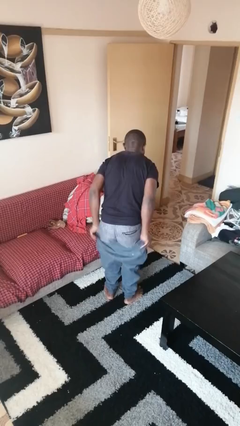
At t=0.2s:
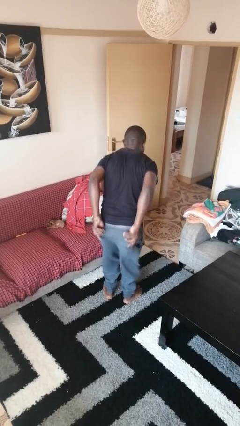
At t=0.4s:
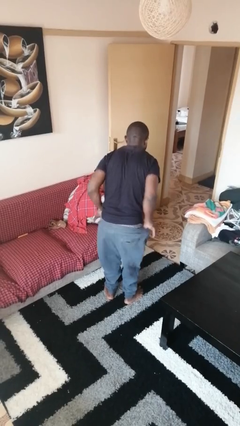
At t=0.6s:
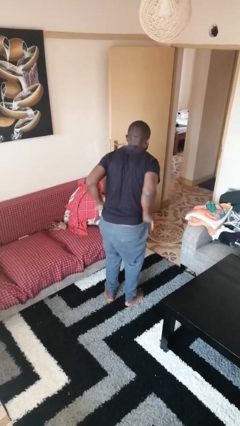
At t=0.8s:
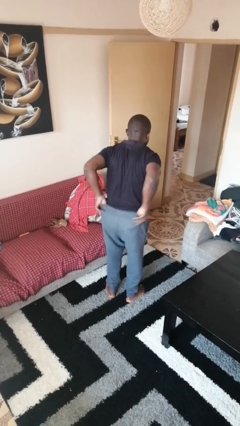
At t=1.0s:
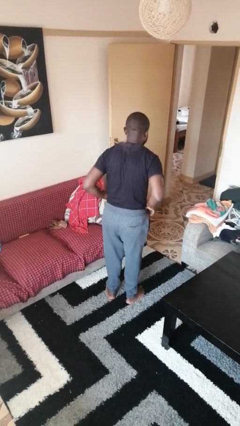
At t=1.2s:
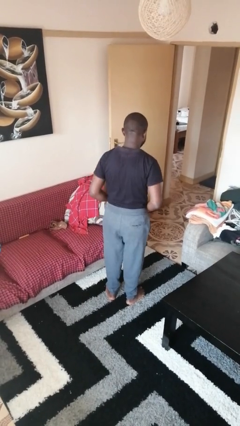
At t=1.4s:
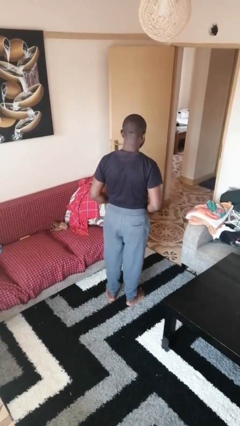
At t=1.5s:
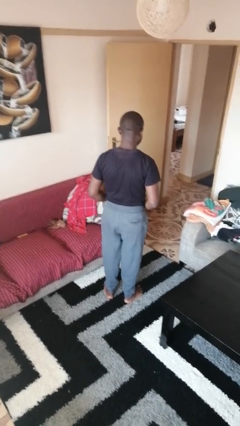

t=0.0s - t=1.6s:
person puts on pants

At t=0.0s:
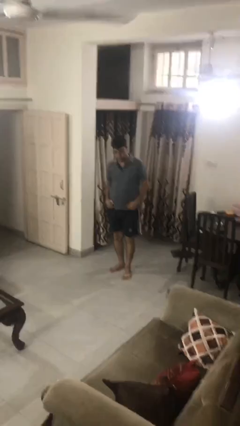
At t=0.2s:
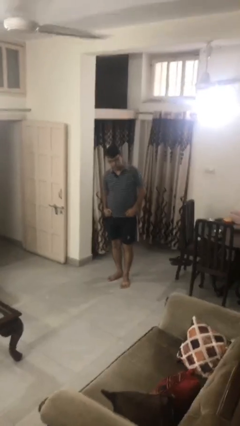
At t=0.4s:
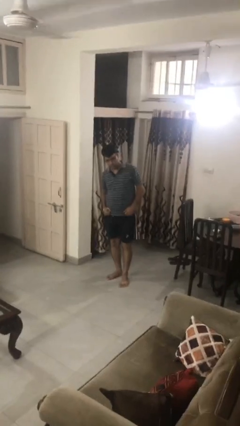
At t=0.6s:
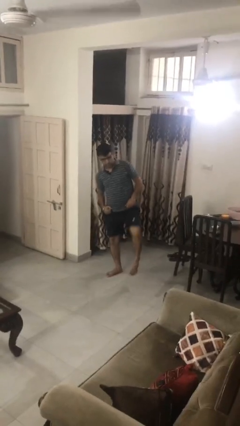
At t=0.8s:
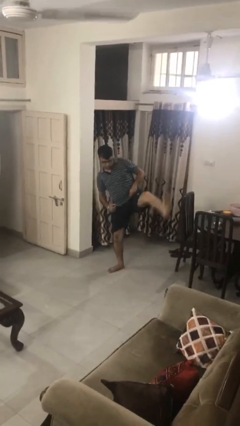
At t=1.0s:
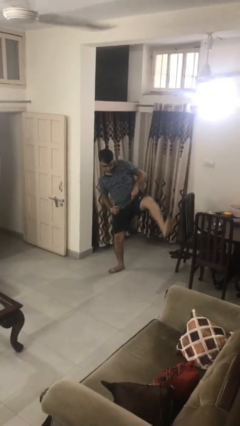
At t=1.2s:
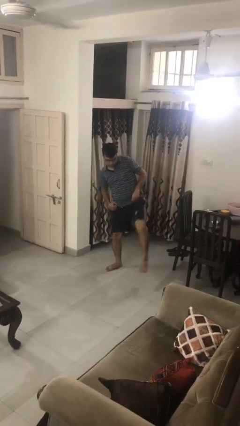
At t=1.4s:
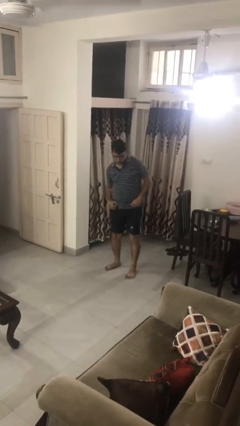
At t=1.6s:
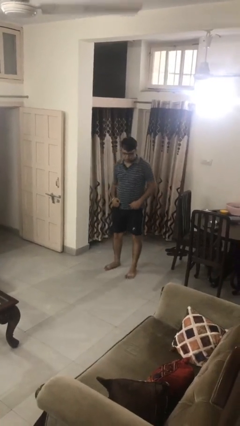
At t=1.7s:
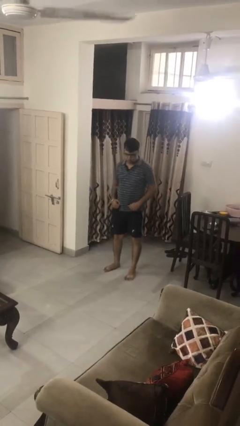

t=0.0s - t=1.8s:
person karate kicks

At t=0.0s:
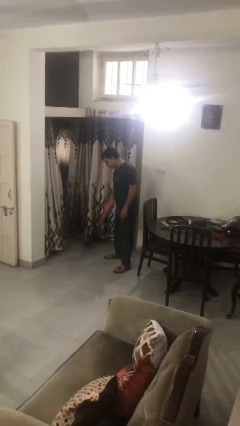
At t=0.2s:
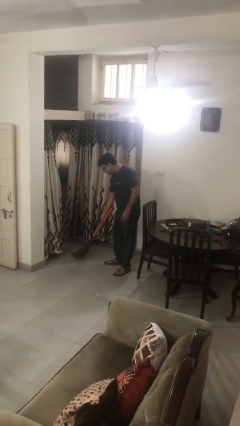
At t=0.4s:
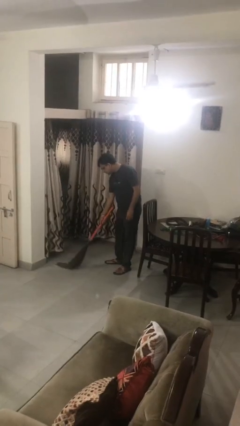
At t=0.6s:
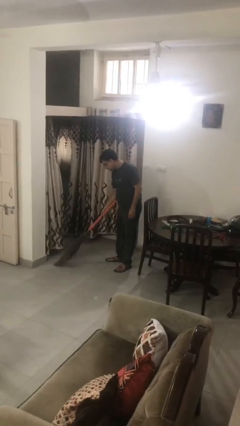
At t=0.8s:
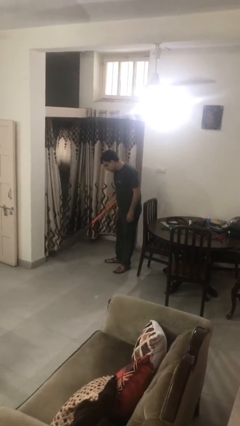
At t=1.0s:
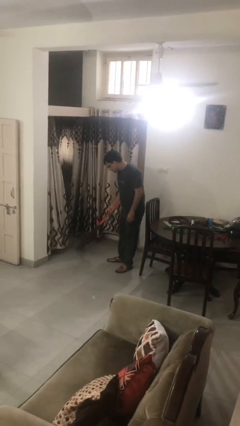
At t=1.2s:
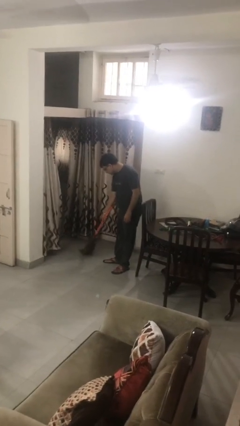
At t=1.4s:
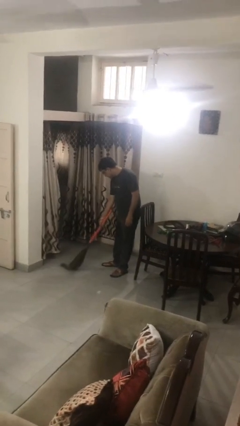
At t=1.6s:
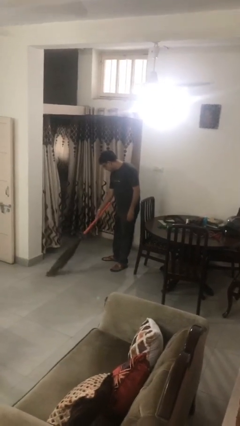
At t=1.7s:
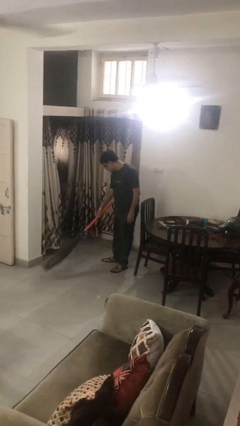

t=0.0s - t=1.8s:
person sweeps floor

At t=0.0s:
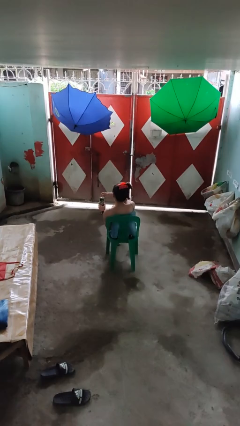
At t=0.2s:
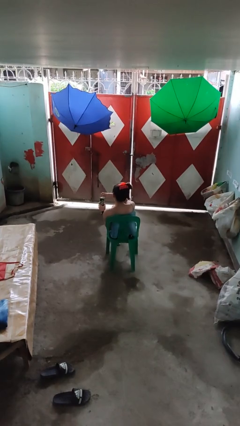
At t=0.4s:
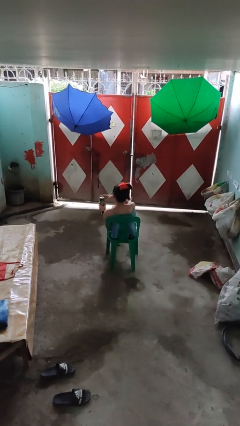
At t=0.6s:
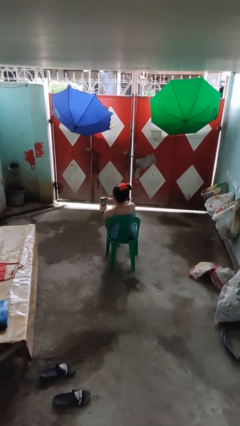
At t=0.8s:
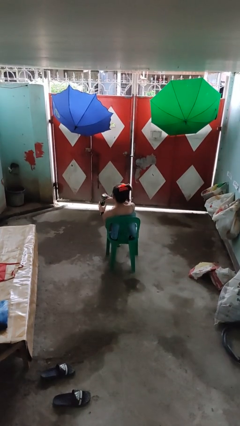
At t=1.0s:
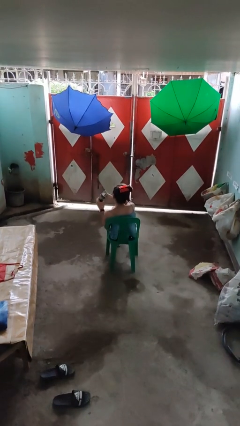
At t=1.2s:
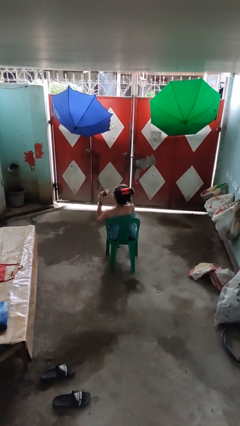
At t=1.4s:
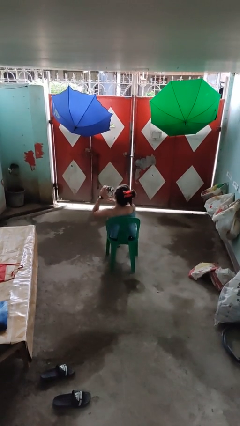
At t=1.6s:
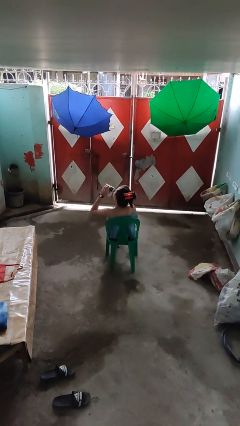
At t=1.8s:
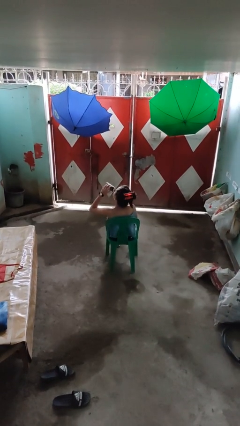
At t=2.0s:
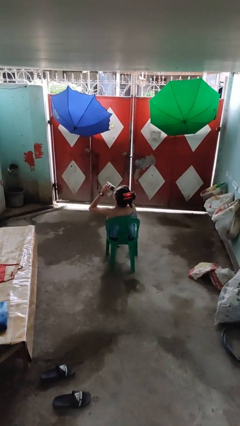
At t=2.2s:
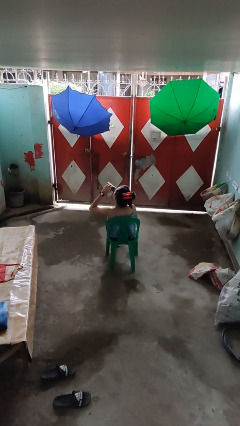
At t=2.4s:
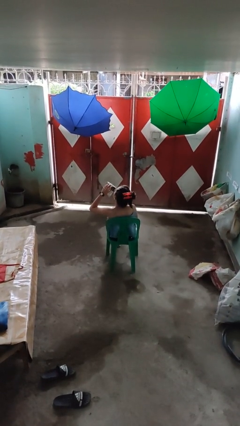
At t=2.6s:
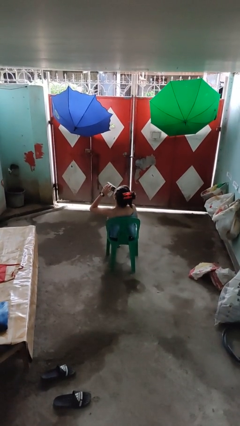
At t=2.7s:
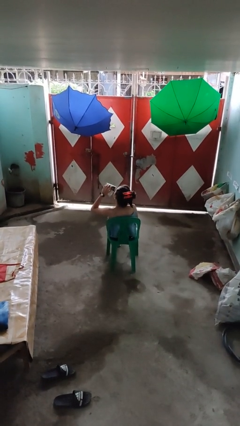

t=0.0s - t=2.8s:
person drinks from beverage can

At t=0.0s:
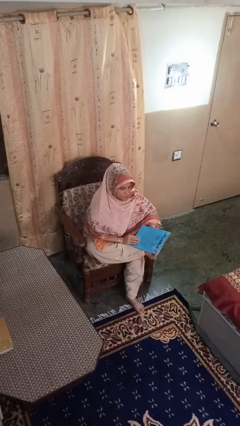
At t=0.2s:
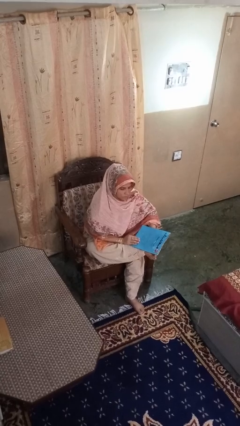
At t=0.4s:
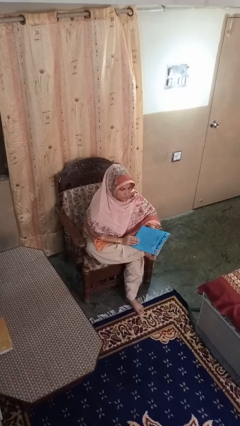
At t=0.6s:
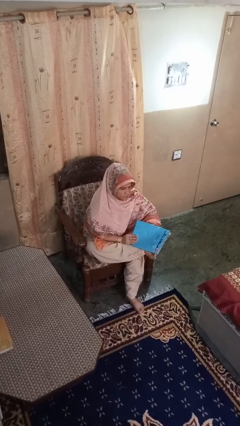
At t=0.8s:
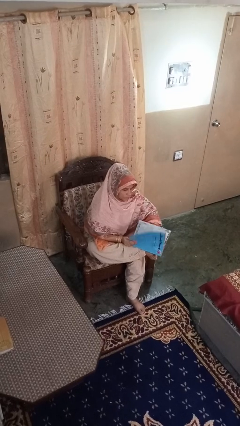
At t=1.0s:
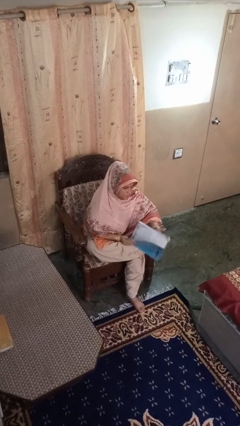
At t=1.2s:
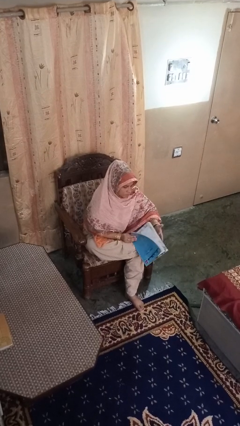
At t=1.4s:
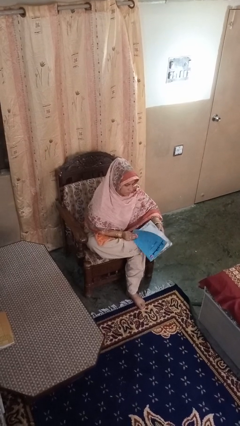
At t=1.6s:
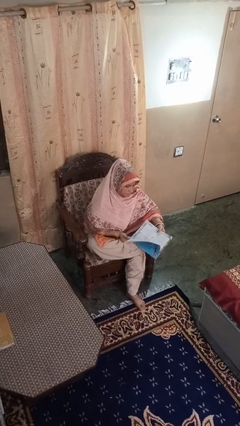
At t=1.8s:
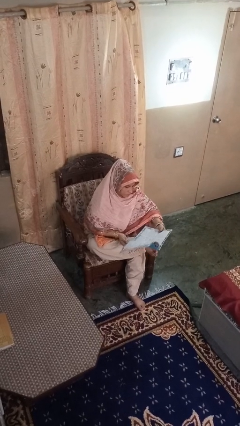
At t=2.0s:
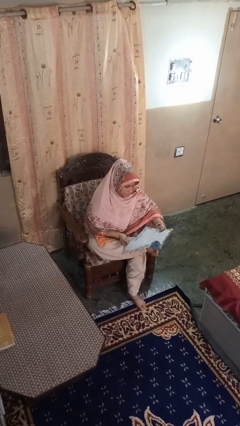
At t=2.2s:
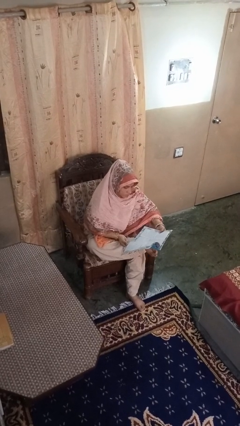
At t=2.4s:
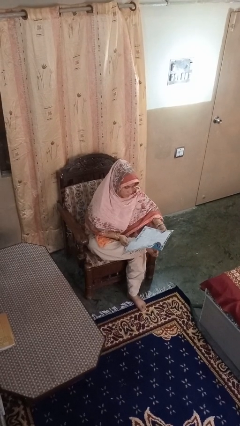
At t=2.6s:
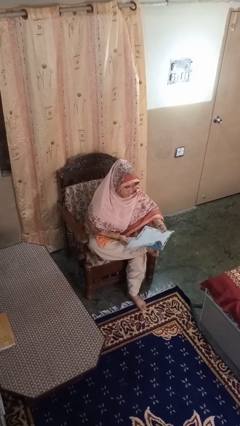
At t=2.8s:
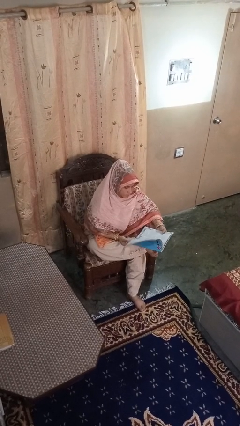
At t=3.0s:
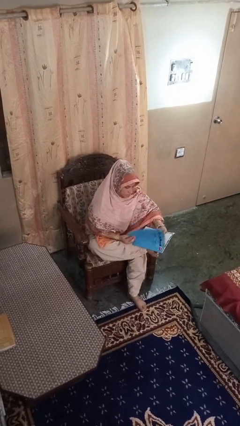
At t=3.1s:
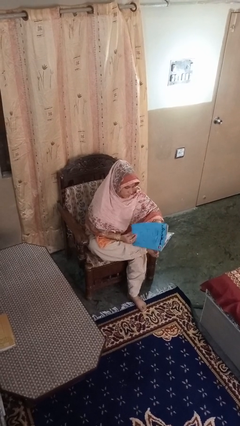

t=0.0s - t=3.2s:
person reads magazine

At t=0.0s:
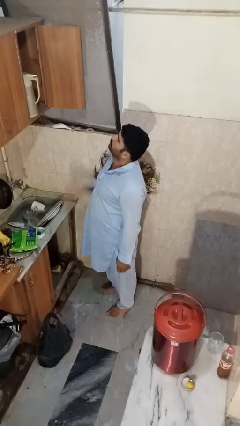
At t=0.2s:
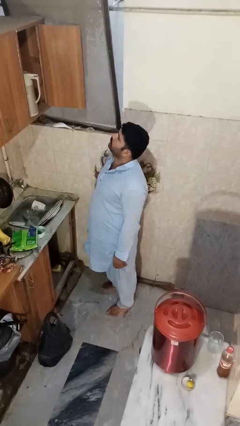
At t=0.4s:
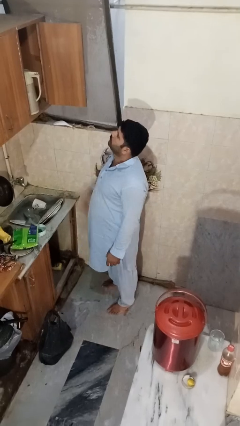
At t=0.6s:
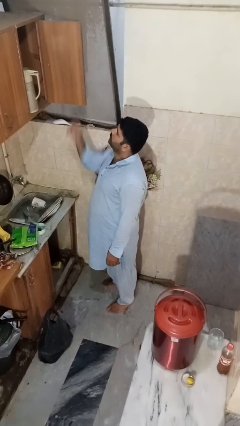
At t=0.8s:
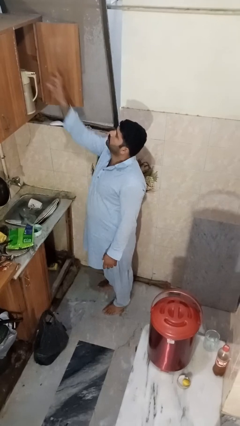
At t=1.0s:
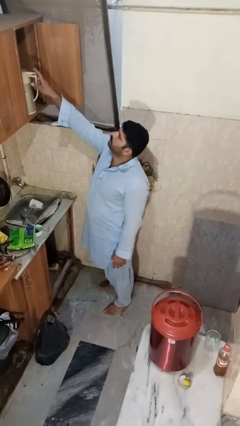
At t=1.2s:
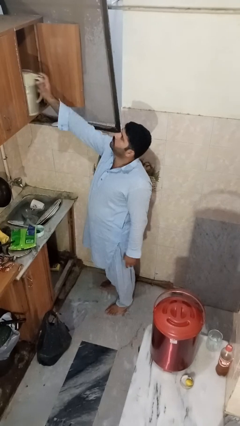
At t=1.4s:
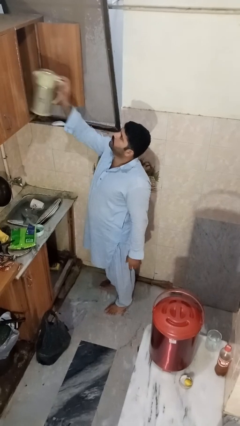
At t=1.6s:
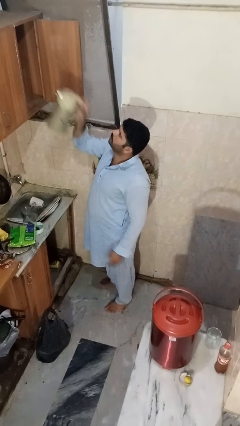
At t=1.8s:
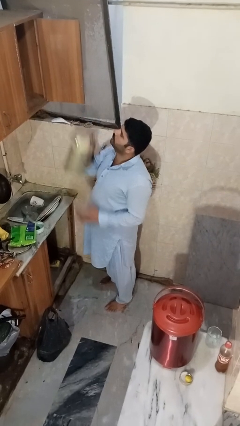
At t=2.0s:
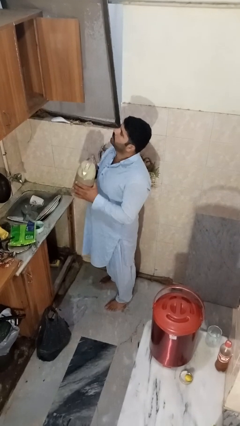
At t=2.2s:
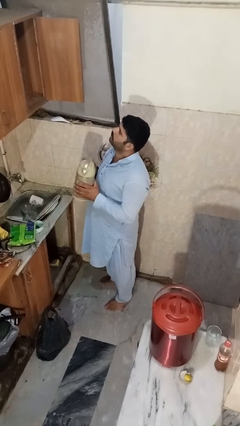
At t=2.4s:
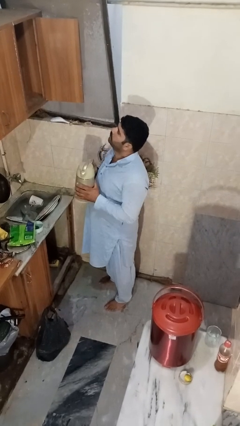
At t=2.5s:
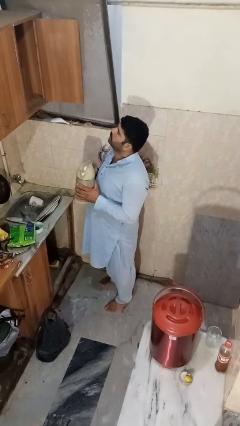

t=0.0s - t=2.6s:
person takes object from cabinet

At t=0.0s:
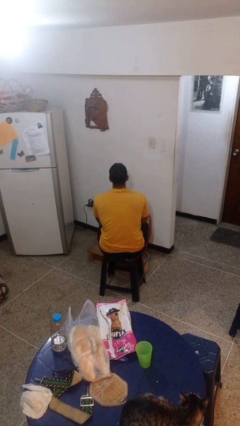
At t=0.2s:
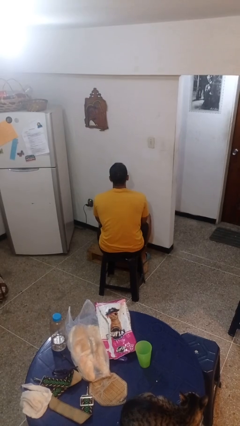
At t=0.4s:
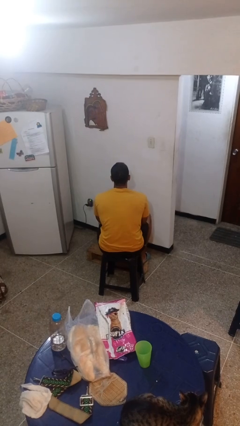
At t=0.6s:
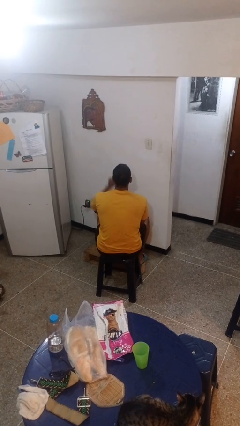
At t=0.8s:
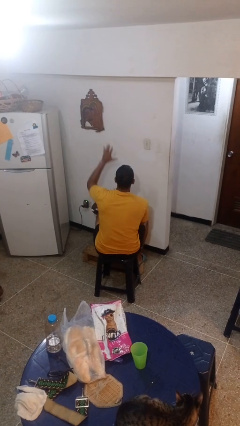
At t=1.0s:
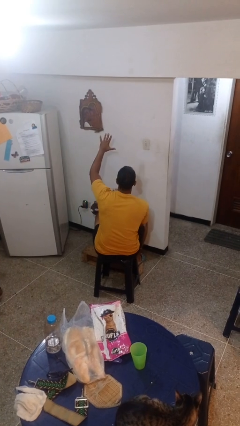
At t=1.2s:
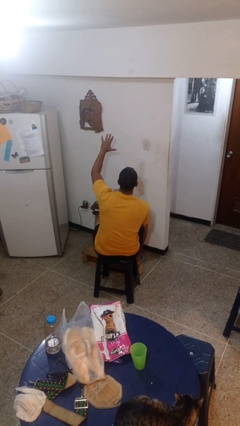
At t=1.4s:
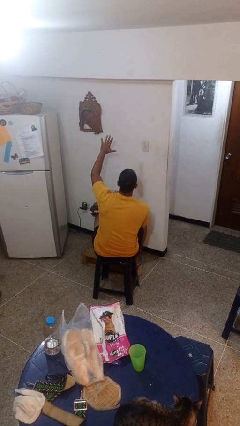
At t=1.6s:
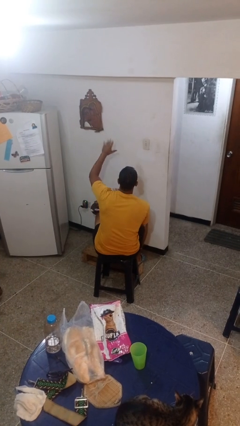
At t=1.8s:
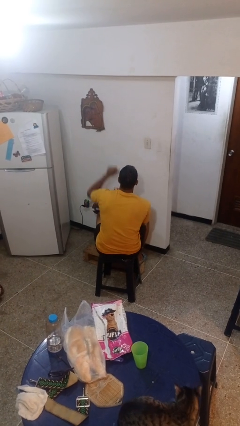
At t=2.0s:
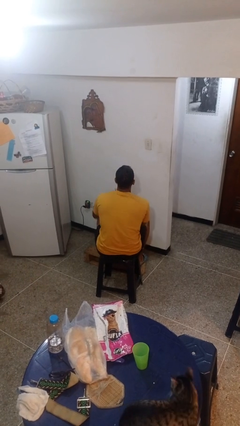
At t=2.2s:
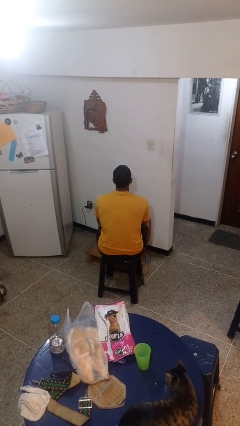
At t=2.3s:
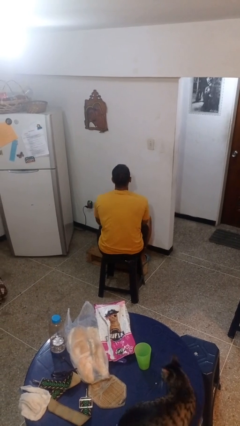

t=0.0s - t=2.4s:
person gestures number five

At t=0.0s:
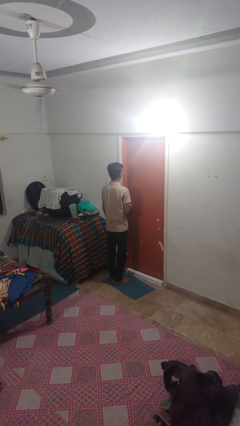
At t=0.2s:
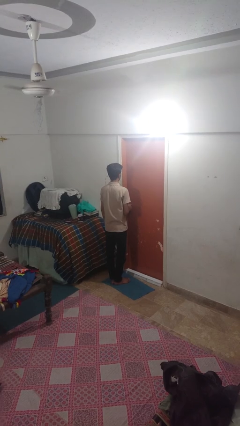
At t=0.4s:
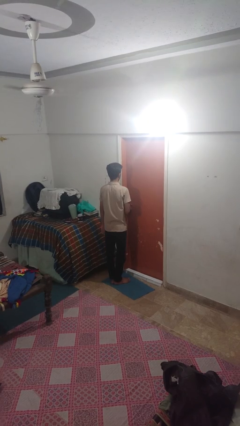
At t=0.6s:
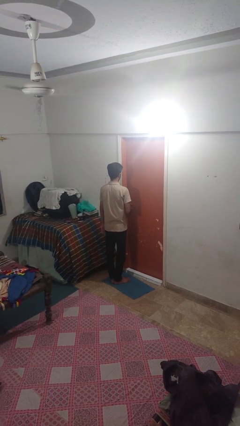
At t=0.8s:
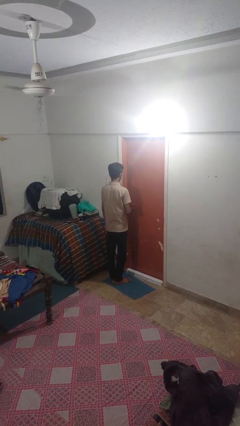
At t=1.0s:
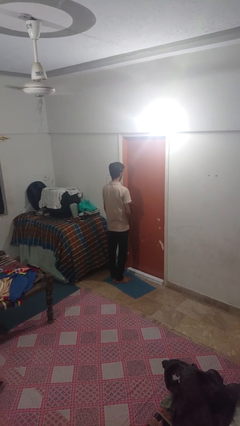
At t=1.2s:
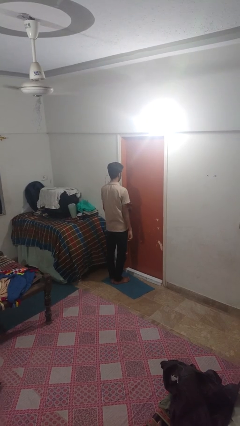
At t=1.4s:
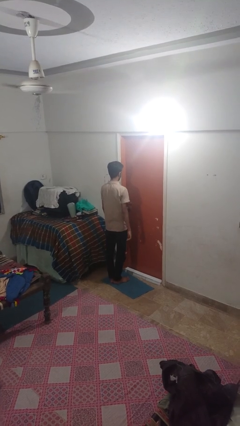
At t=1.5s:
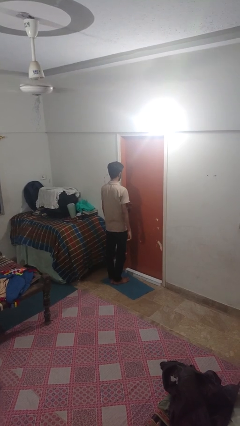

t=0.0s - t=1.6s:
person locks door with keys
